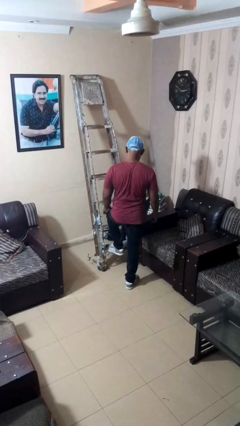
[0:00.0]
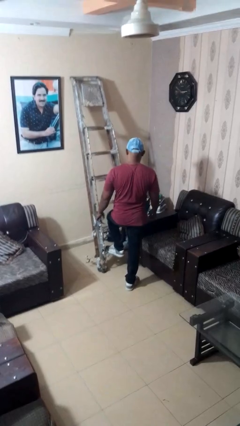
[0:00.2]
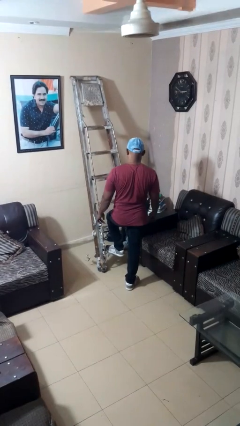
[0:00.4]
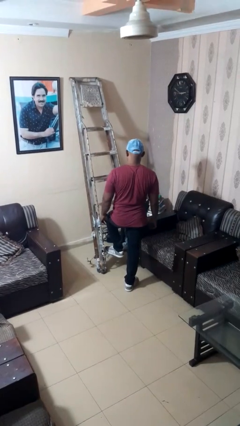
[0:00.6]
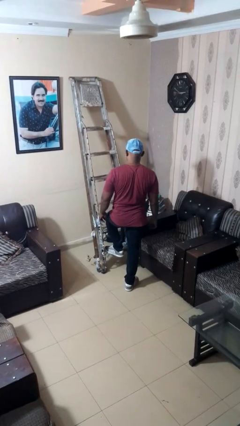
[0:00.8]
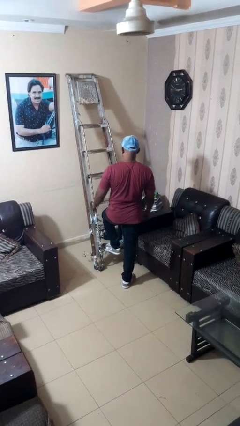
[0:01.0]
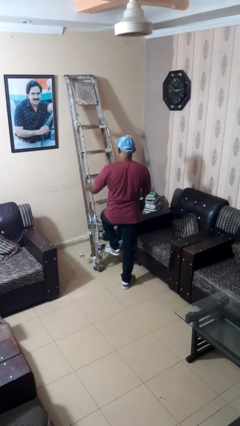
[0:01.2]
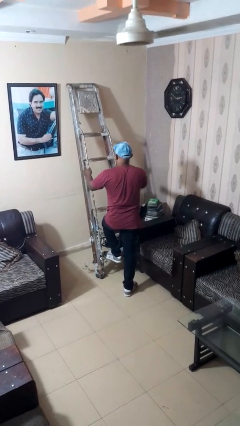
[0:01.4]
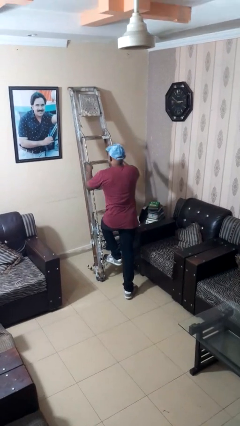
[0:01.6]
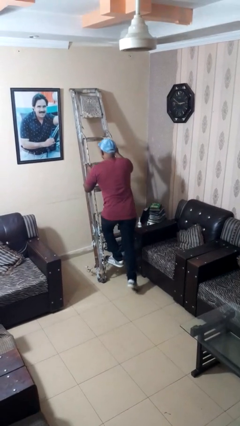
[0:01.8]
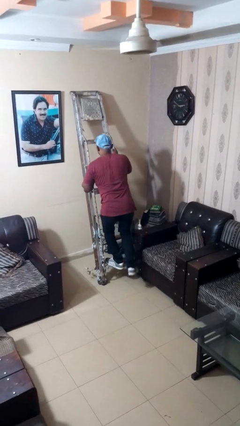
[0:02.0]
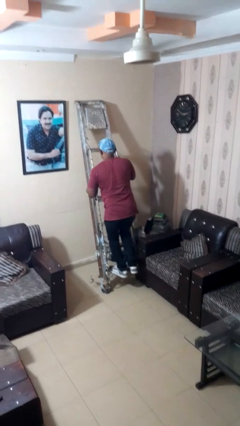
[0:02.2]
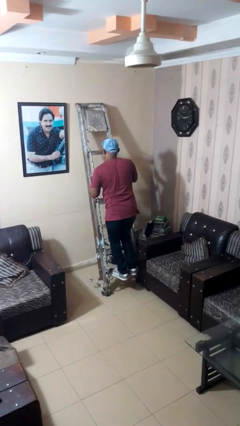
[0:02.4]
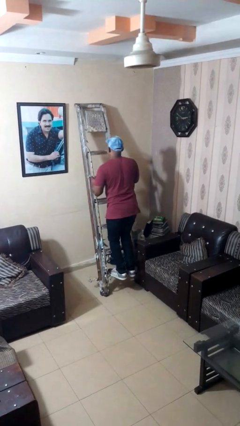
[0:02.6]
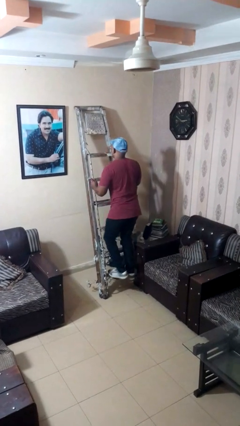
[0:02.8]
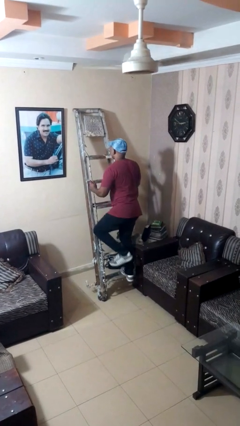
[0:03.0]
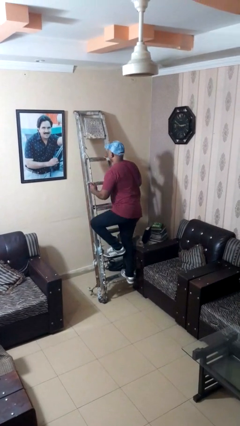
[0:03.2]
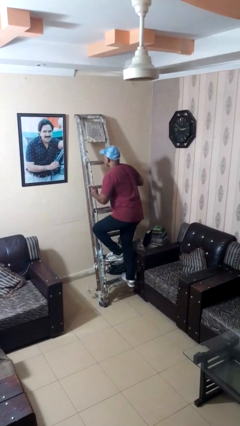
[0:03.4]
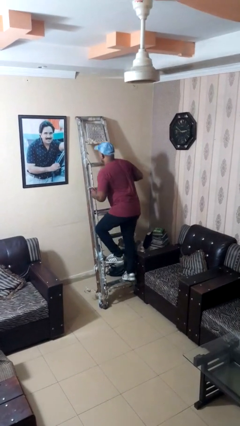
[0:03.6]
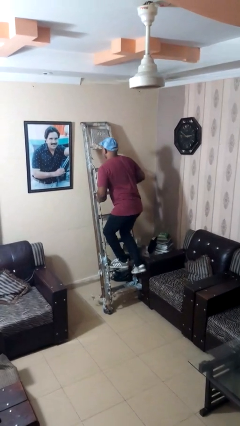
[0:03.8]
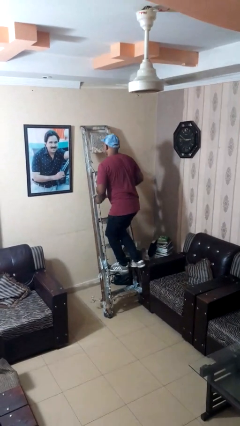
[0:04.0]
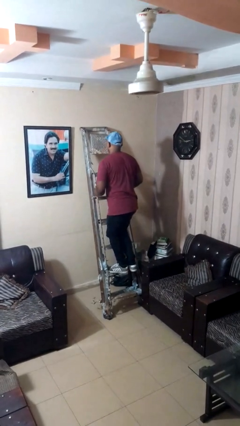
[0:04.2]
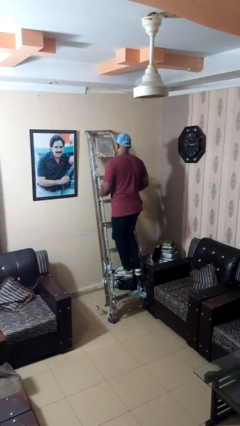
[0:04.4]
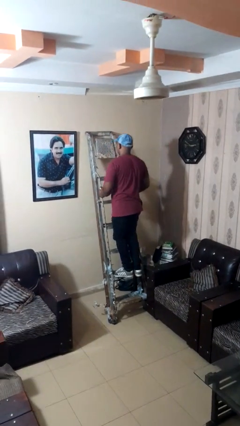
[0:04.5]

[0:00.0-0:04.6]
person climbs up ladder

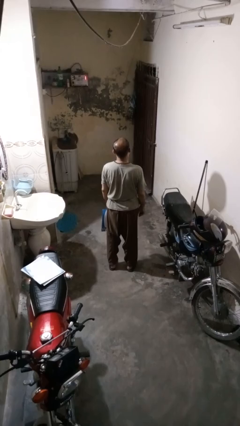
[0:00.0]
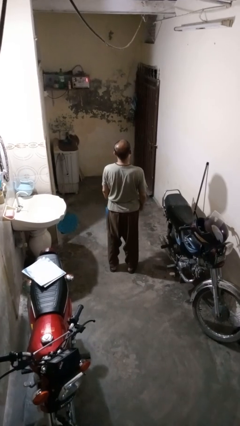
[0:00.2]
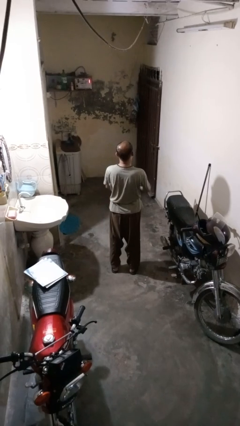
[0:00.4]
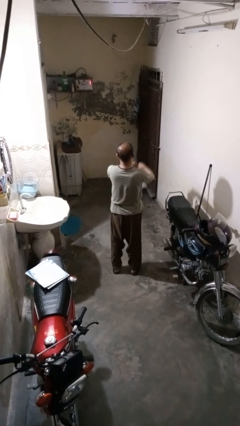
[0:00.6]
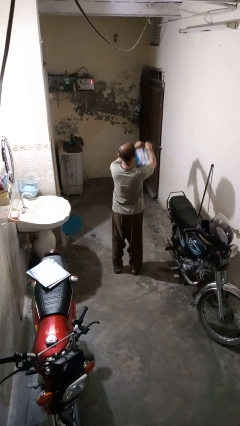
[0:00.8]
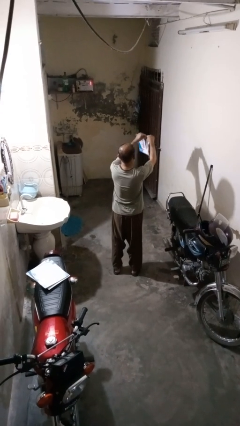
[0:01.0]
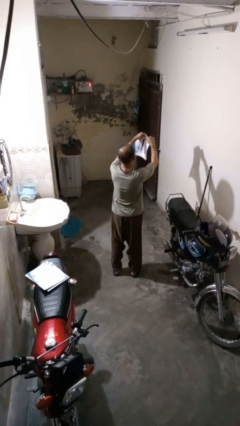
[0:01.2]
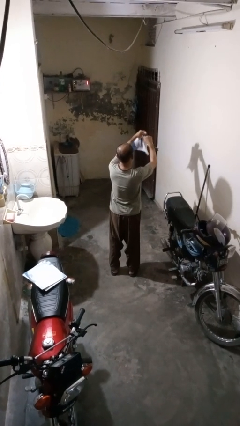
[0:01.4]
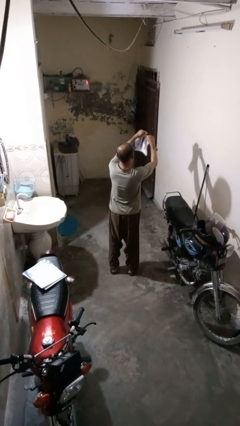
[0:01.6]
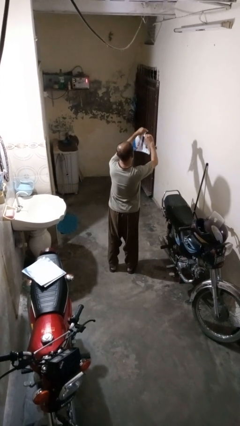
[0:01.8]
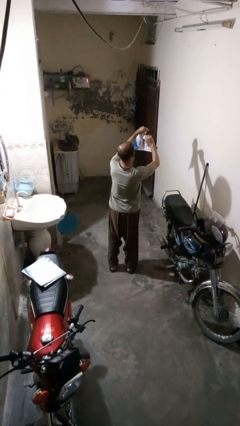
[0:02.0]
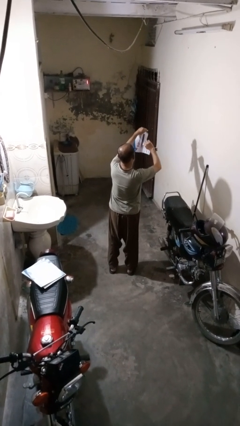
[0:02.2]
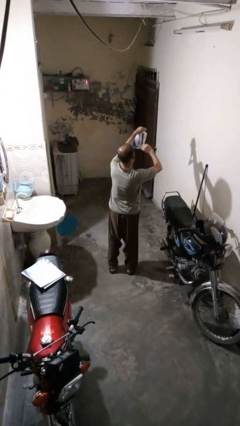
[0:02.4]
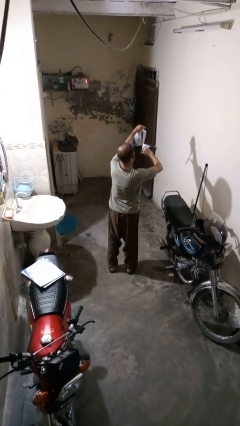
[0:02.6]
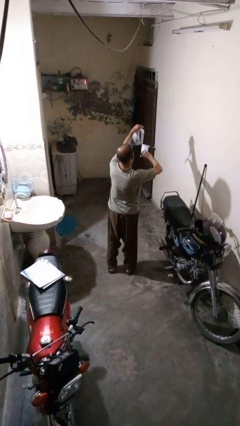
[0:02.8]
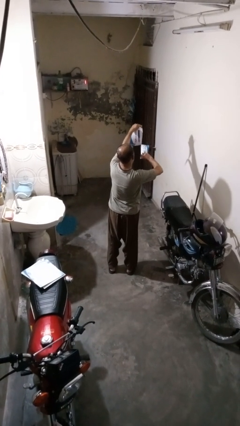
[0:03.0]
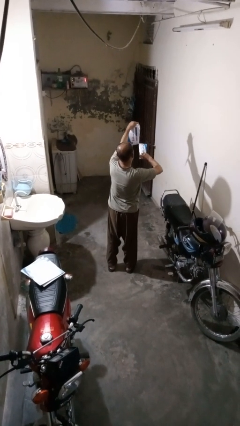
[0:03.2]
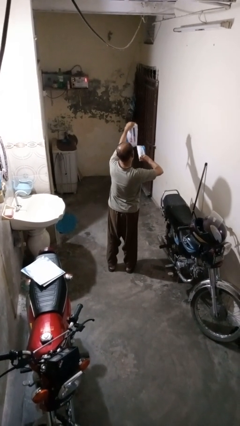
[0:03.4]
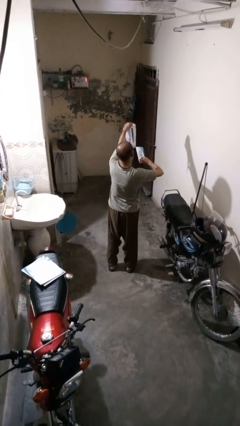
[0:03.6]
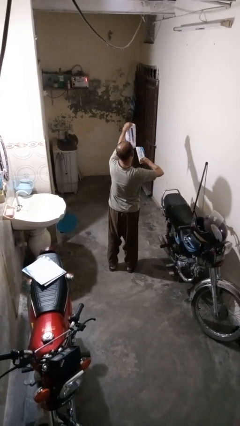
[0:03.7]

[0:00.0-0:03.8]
person tears paper

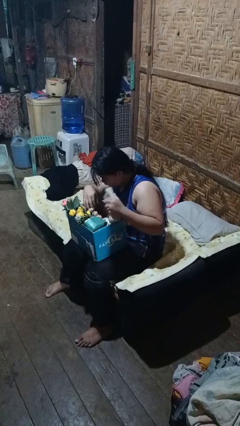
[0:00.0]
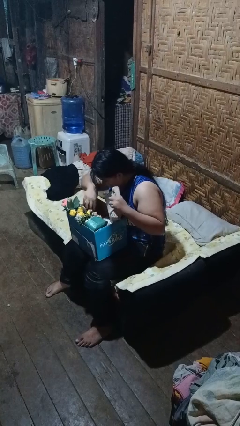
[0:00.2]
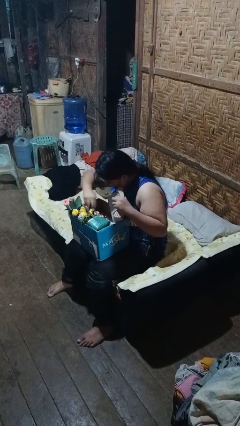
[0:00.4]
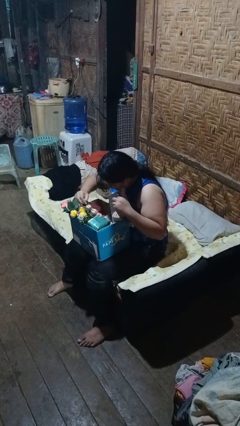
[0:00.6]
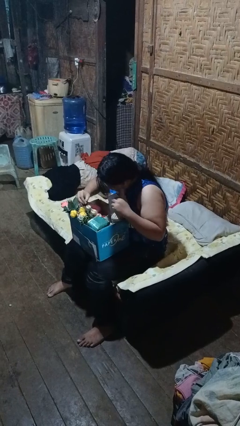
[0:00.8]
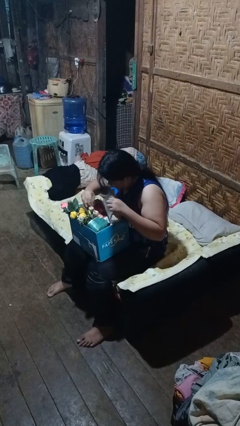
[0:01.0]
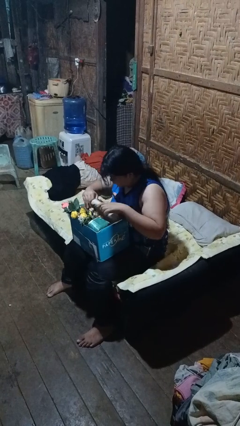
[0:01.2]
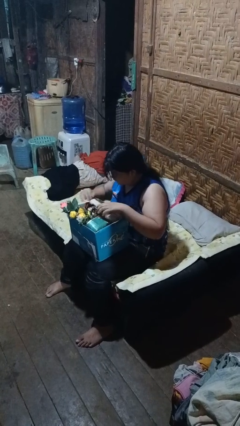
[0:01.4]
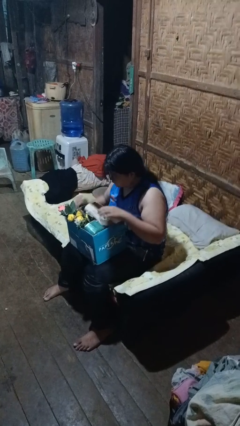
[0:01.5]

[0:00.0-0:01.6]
person searches in box

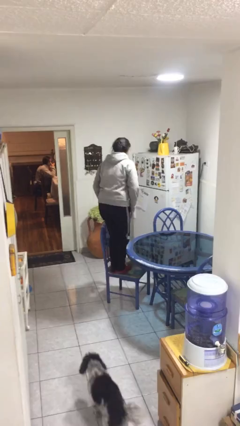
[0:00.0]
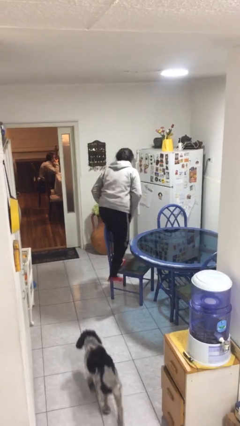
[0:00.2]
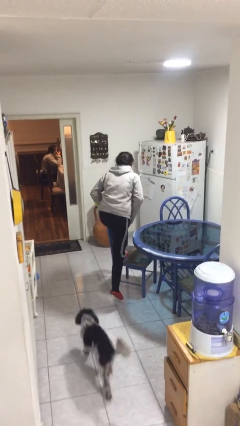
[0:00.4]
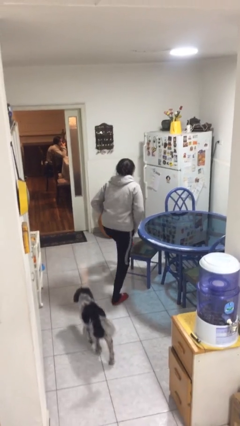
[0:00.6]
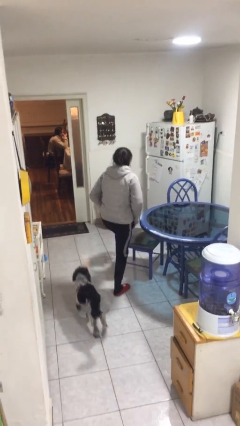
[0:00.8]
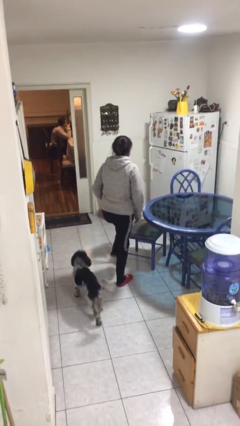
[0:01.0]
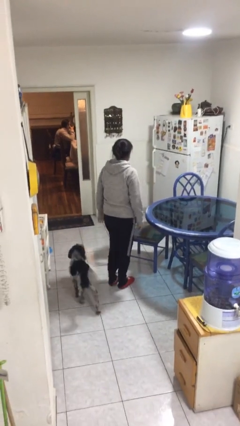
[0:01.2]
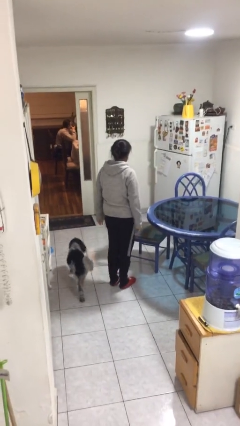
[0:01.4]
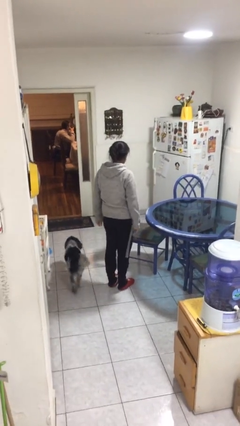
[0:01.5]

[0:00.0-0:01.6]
person climbs off chair

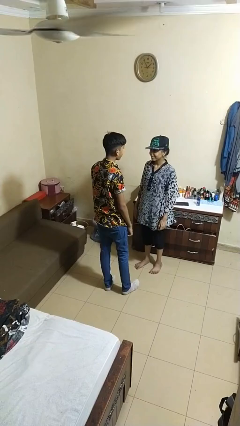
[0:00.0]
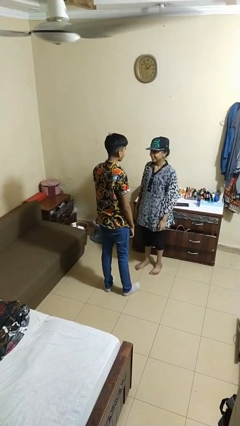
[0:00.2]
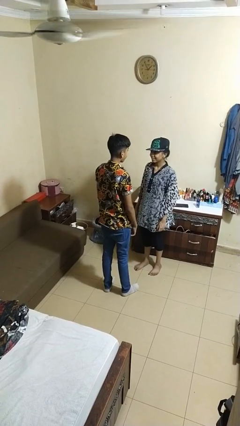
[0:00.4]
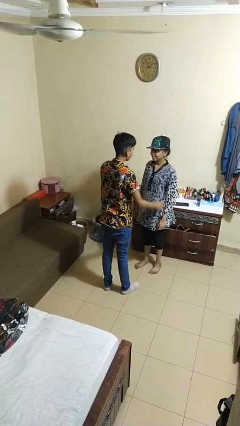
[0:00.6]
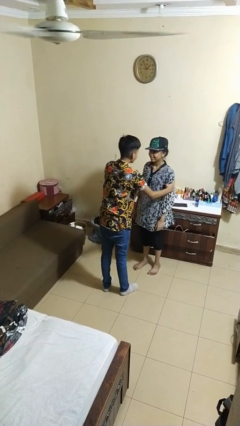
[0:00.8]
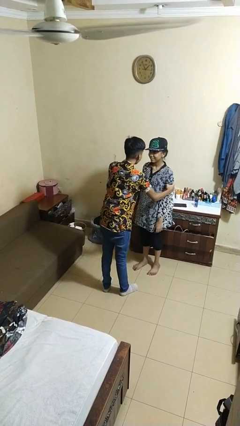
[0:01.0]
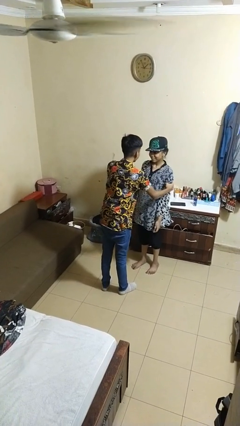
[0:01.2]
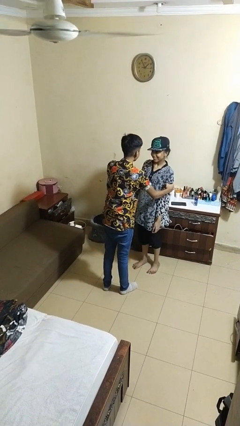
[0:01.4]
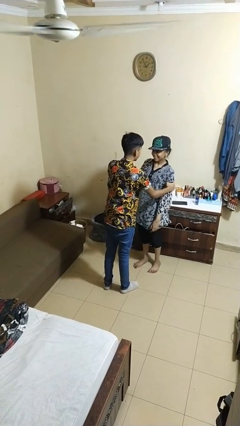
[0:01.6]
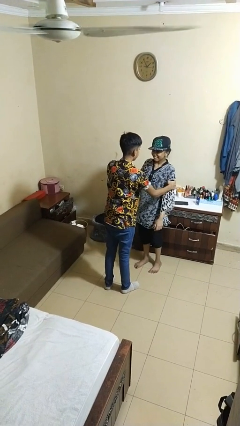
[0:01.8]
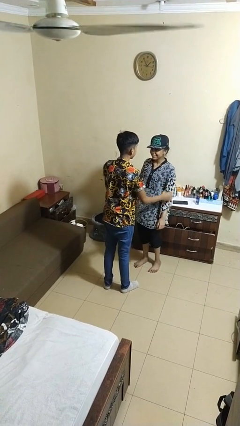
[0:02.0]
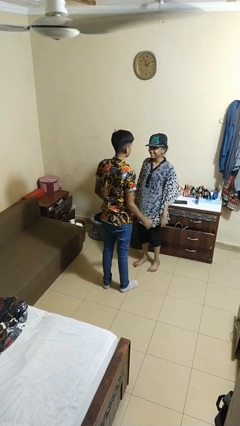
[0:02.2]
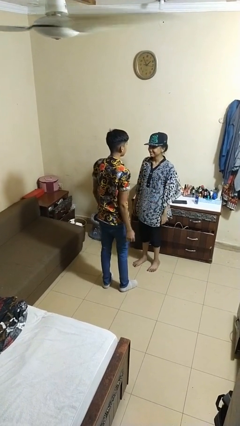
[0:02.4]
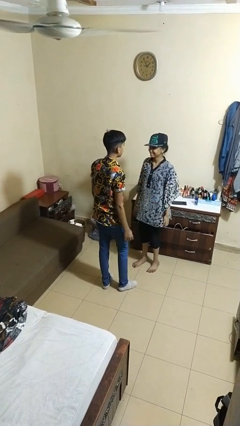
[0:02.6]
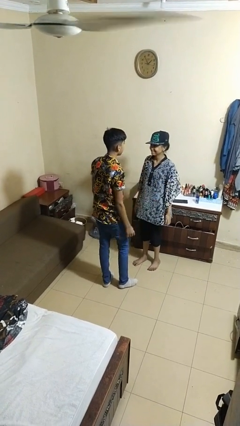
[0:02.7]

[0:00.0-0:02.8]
person grabs person by bicep

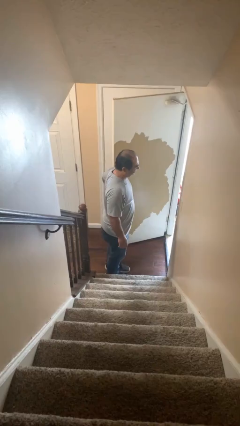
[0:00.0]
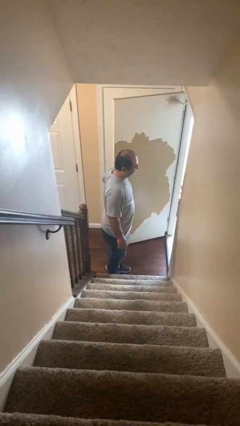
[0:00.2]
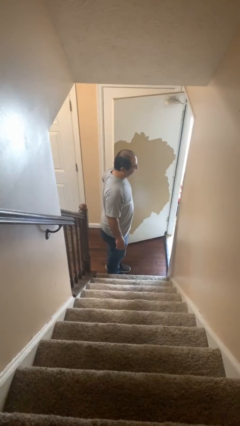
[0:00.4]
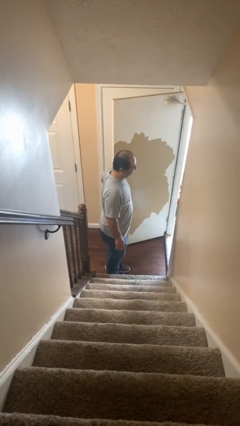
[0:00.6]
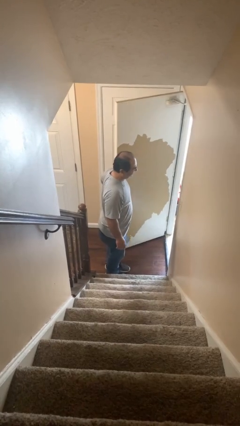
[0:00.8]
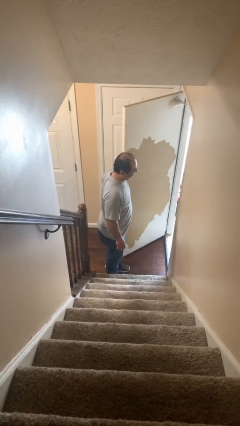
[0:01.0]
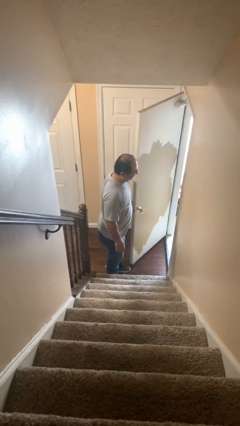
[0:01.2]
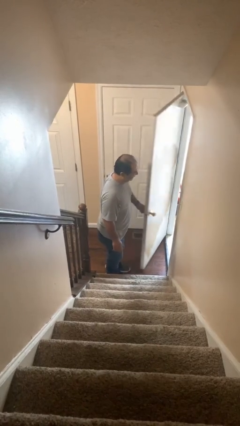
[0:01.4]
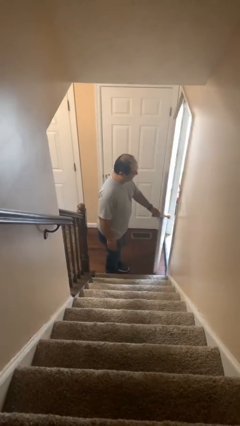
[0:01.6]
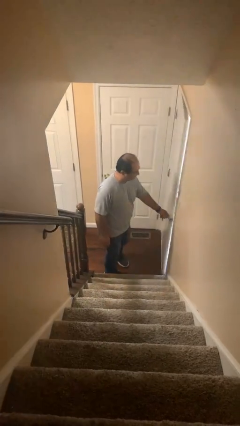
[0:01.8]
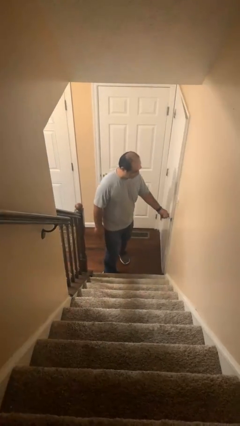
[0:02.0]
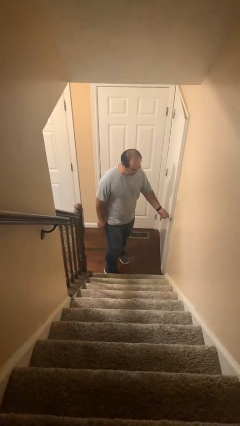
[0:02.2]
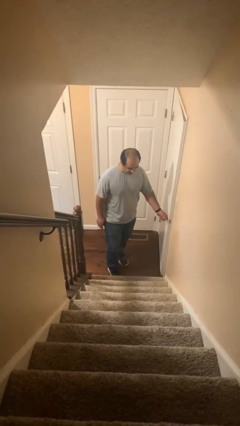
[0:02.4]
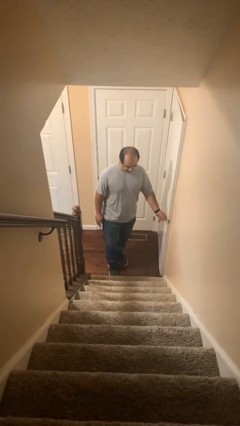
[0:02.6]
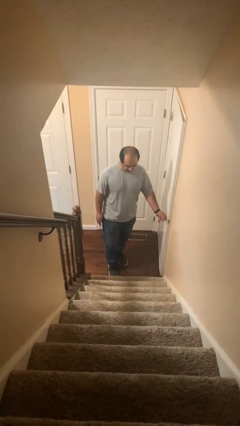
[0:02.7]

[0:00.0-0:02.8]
person closes facility door
